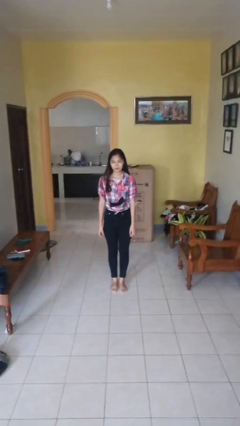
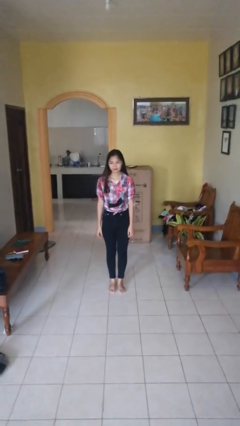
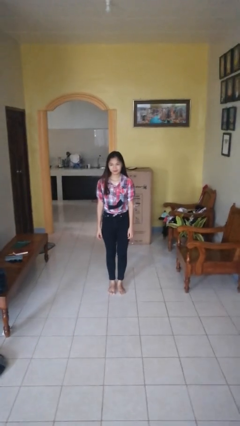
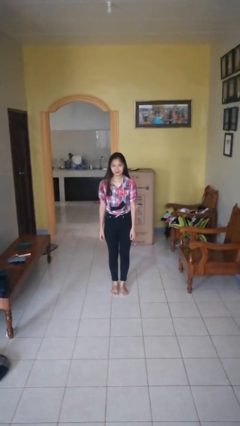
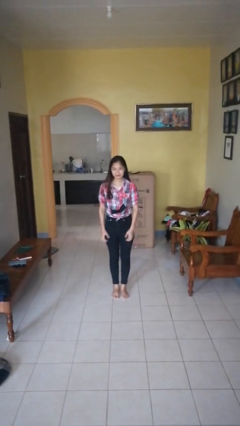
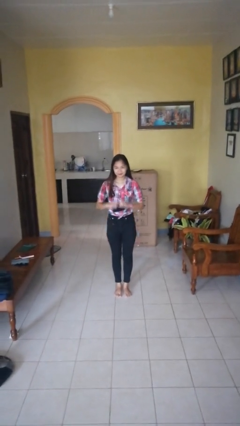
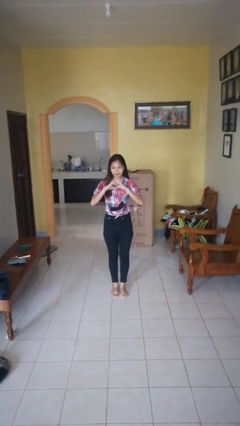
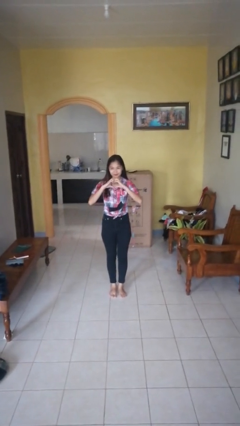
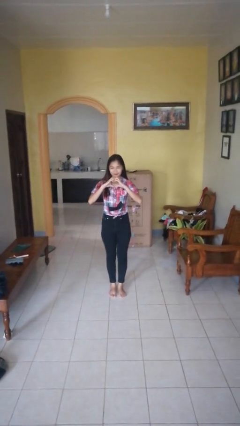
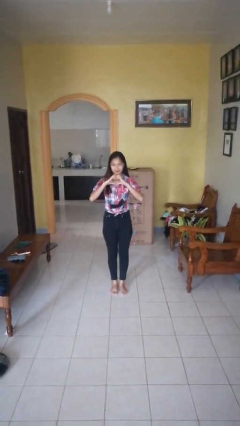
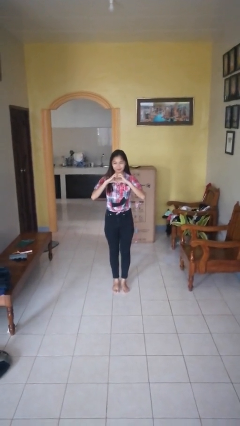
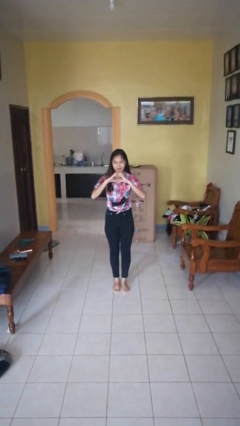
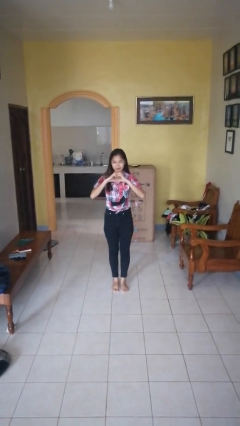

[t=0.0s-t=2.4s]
person gestures heart

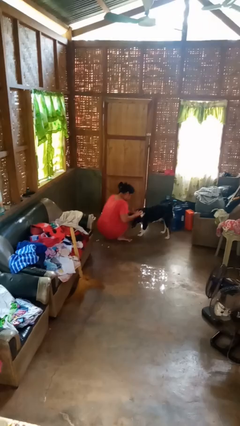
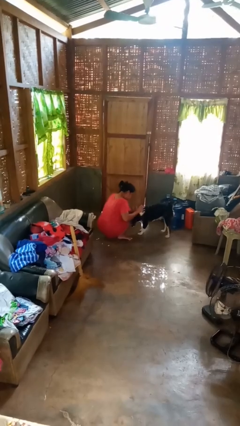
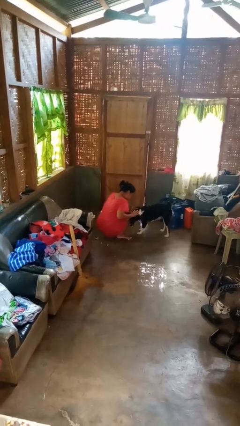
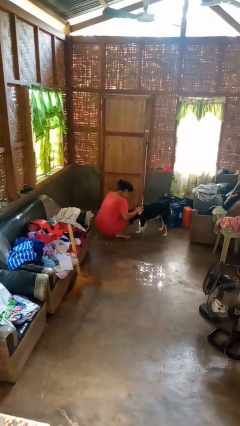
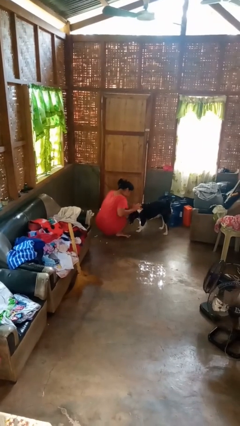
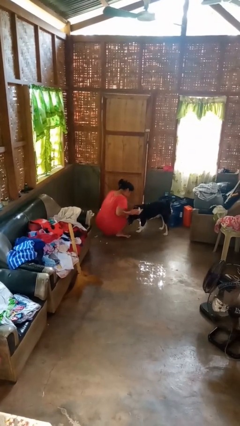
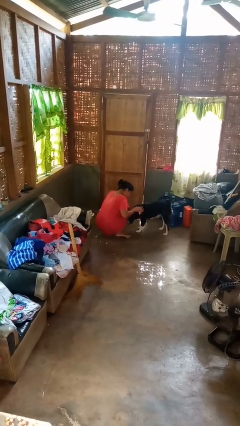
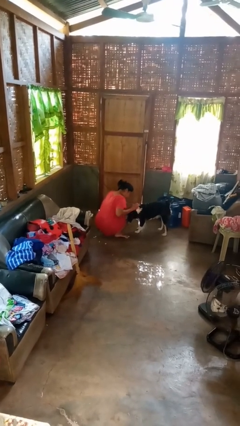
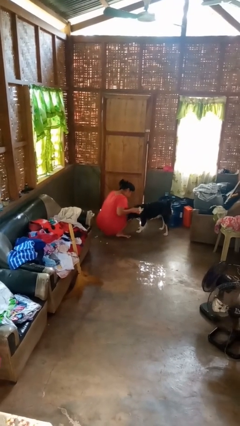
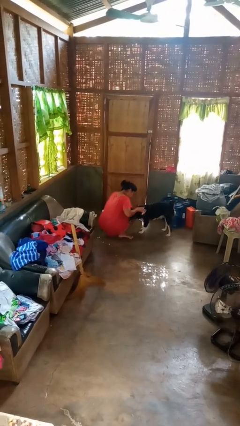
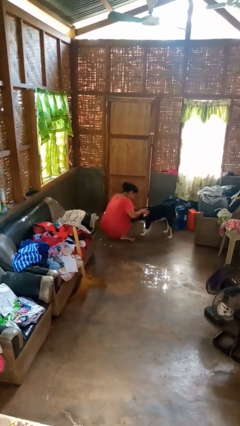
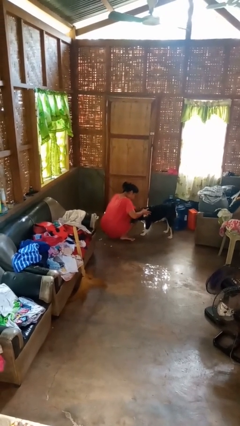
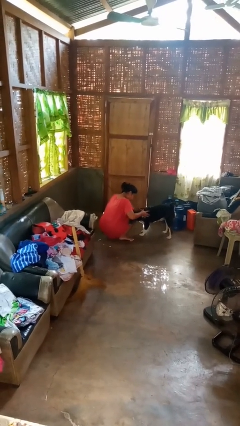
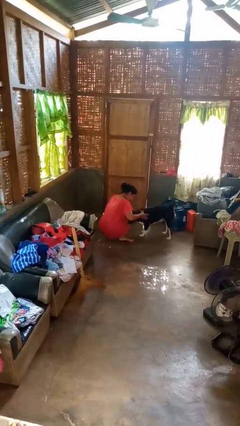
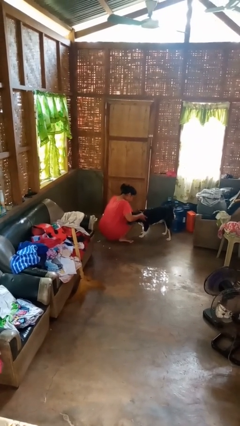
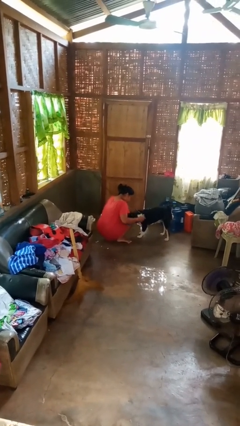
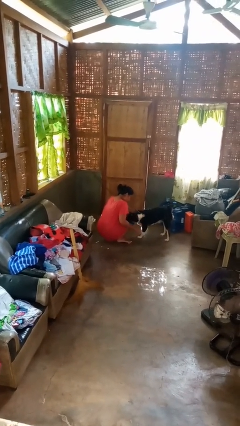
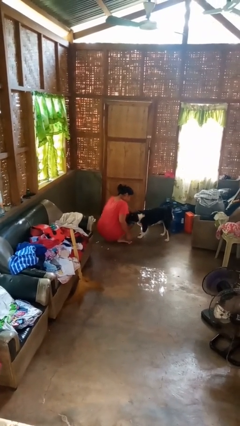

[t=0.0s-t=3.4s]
person pets dog

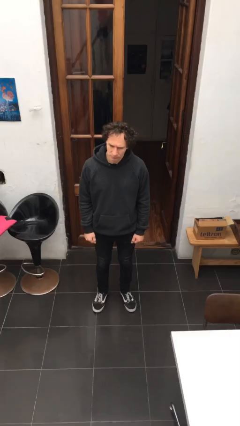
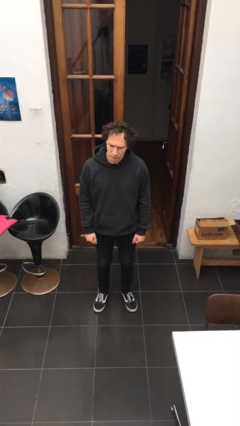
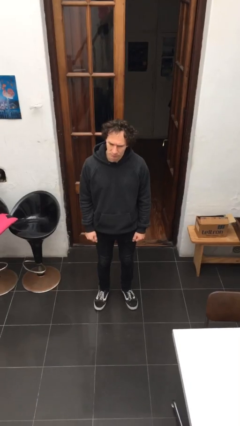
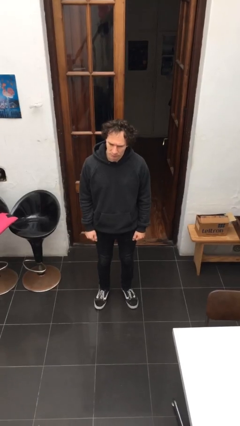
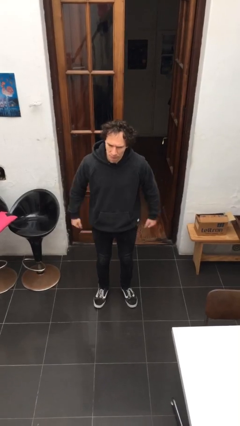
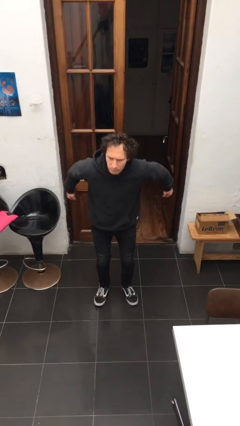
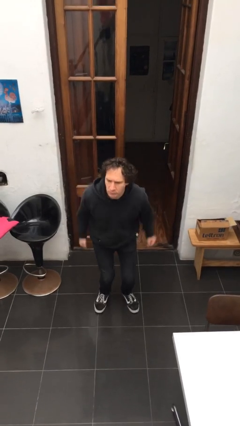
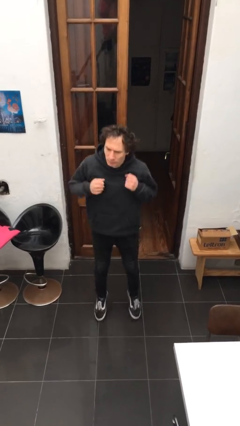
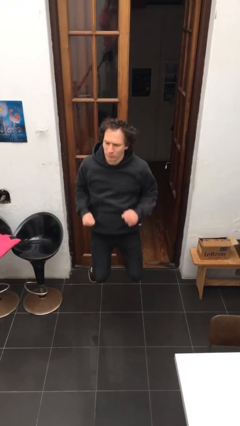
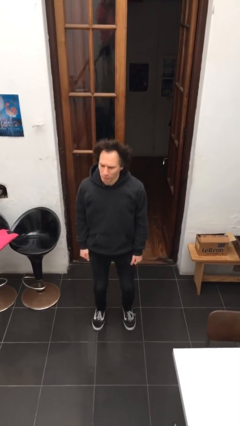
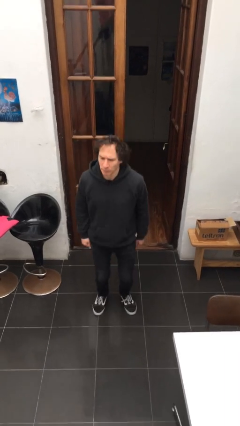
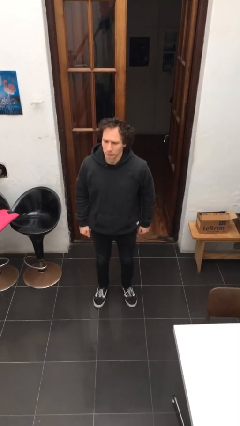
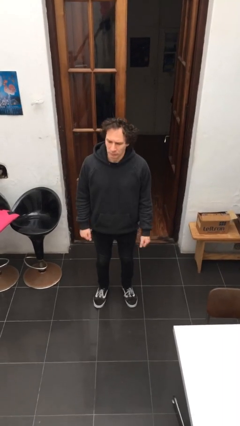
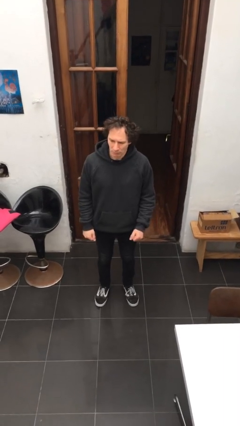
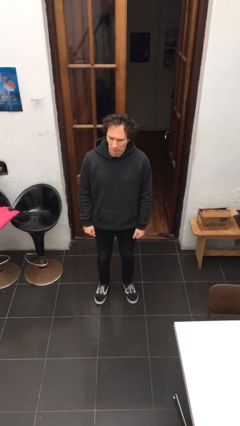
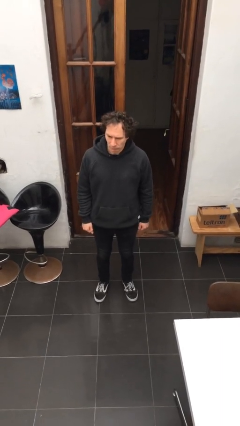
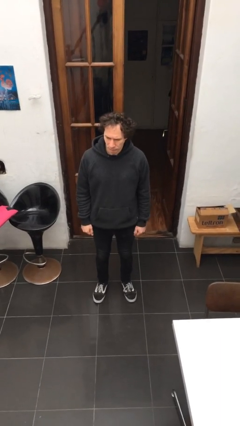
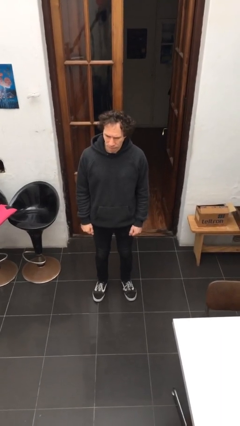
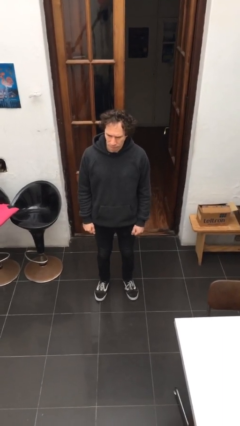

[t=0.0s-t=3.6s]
person jumps

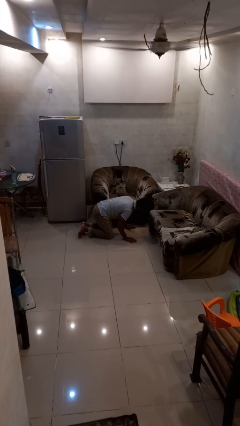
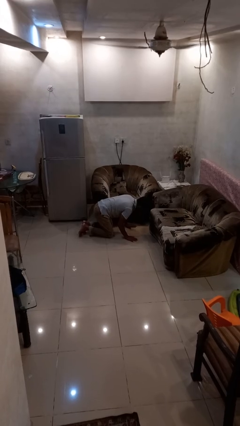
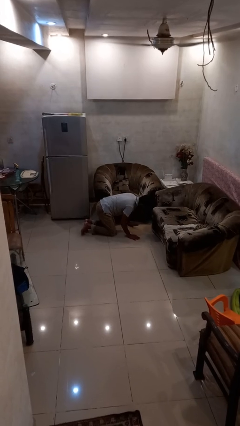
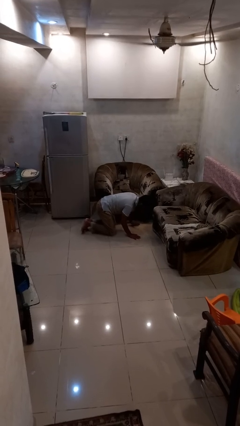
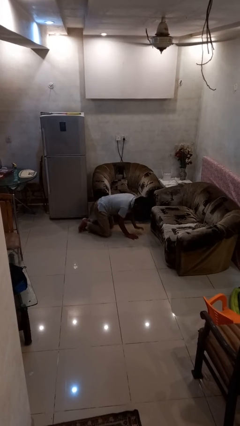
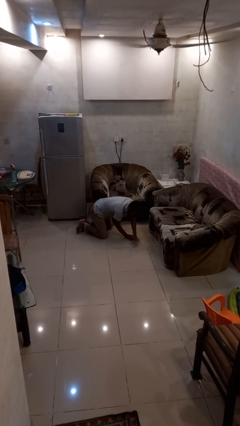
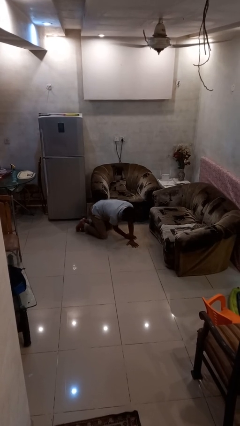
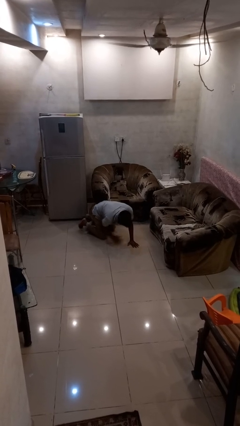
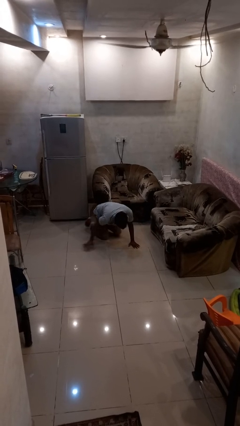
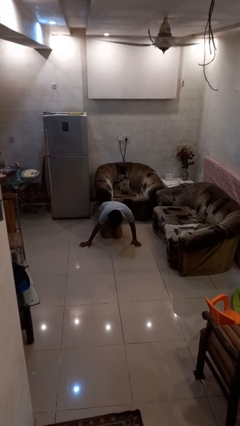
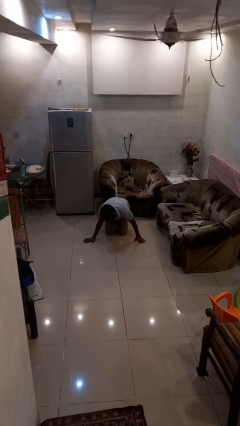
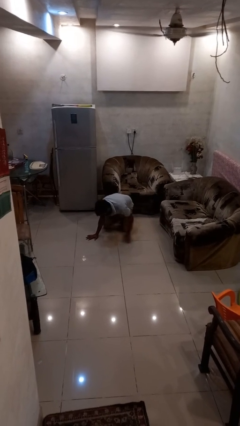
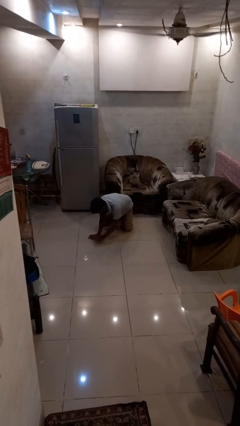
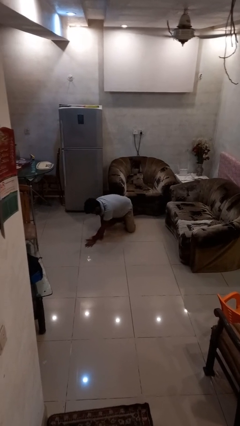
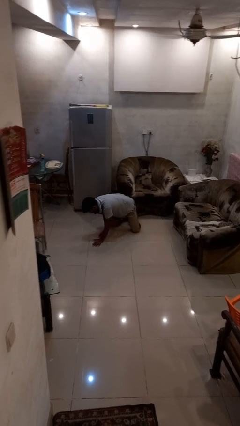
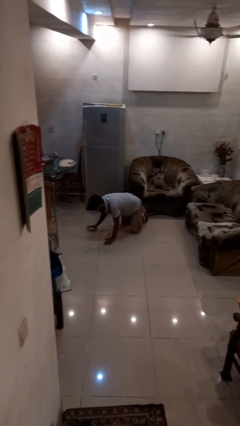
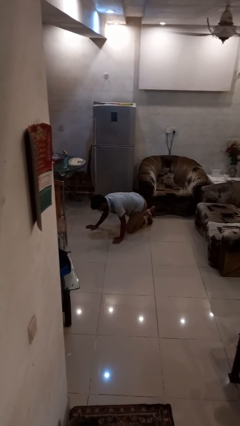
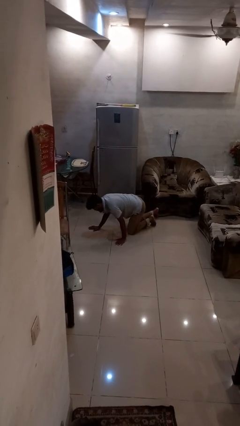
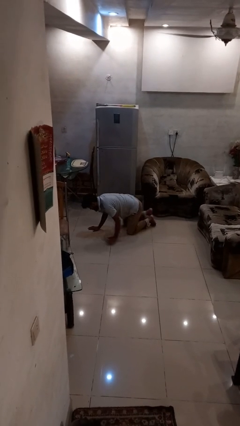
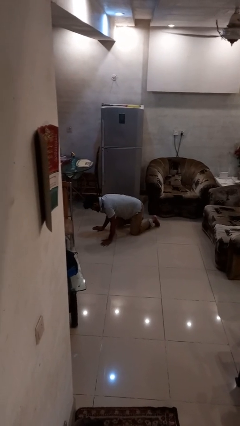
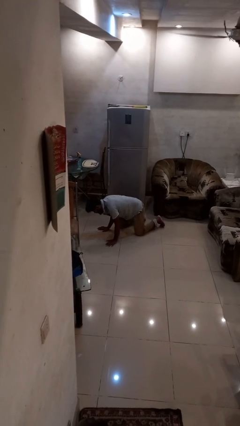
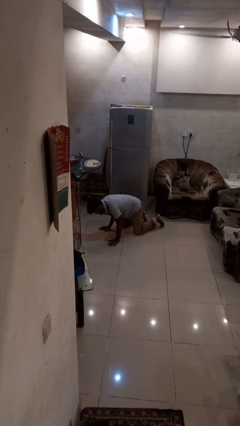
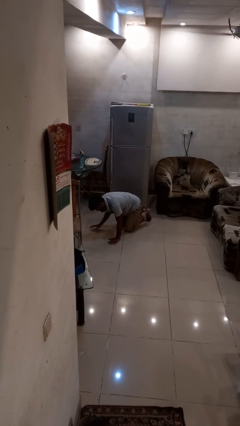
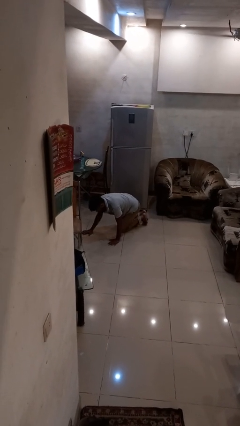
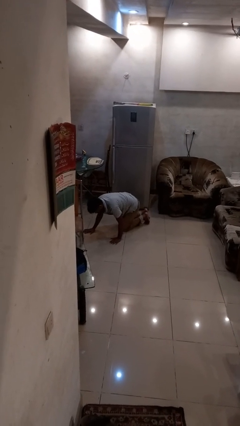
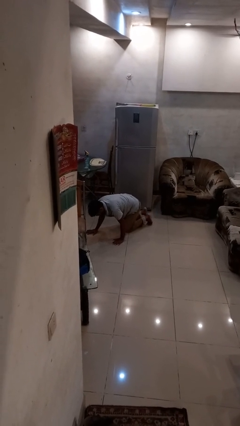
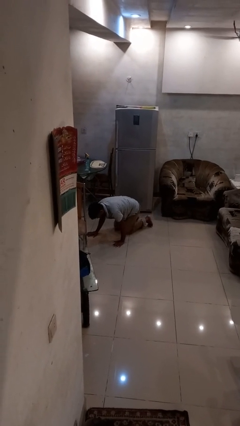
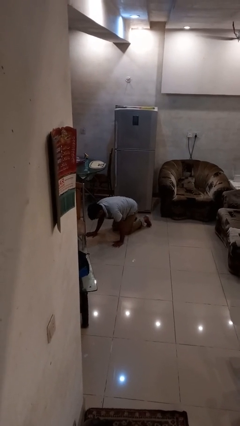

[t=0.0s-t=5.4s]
person crawls

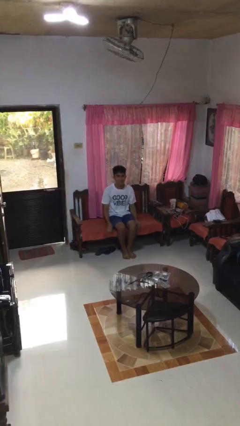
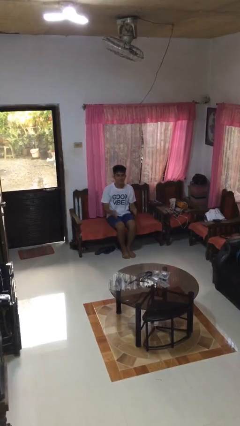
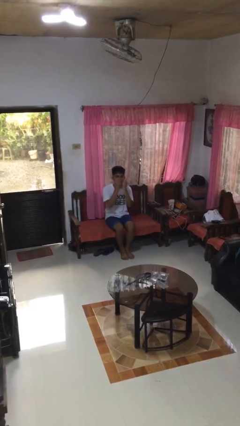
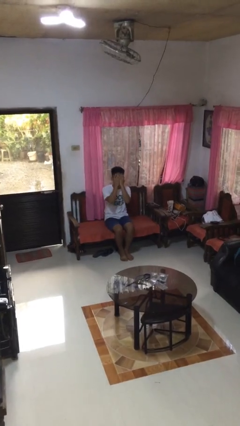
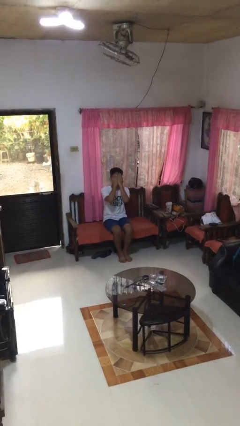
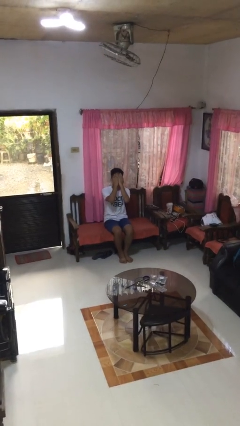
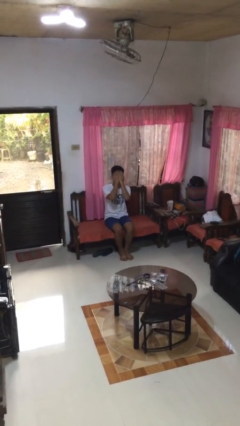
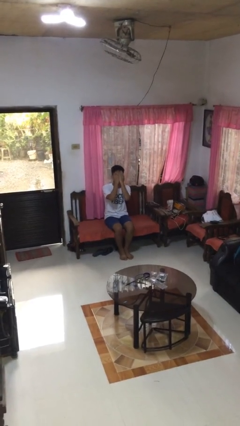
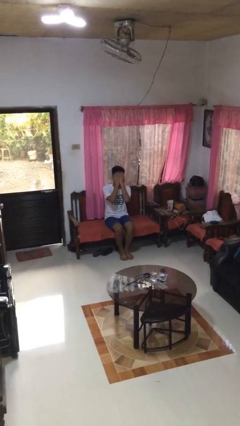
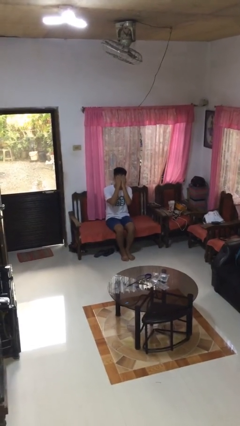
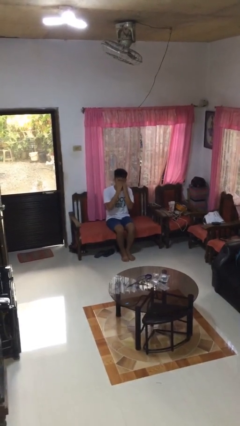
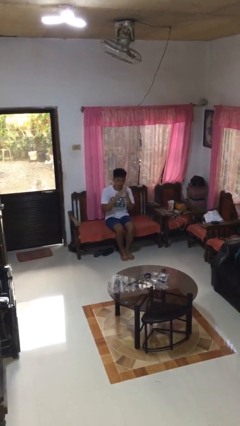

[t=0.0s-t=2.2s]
person covers face with hands

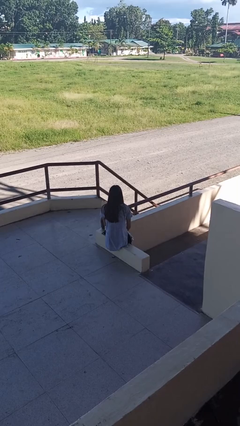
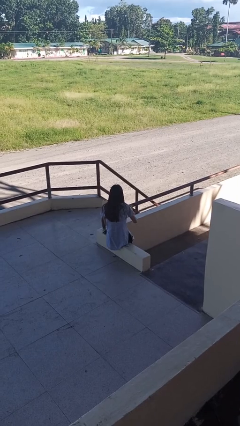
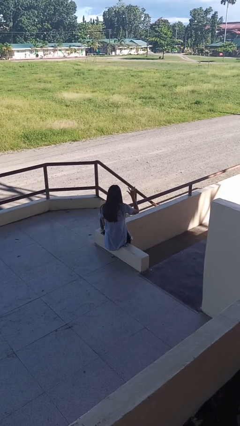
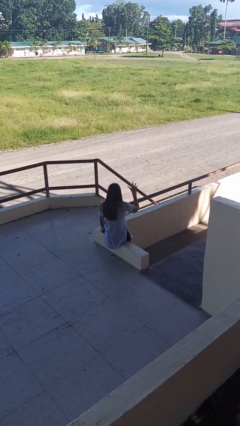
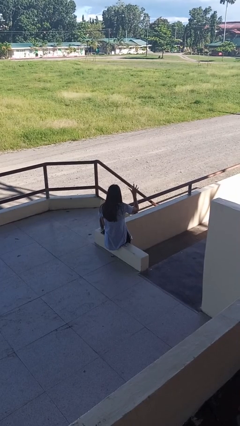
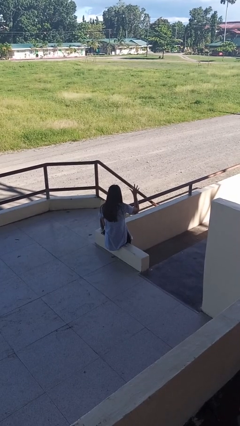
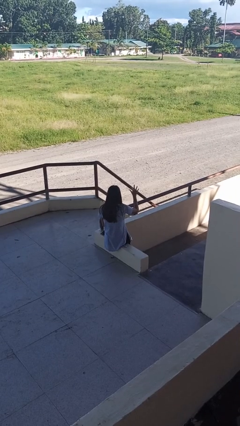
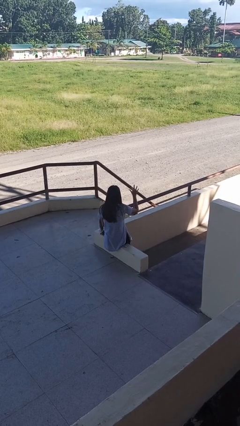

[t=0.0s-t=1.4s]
person gestures number five
